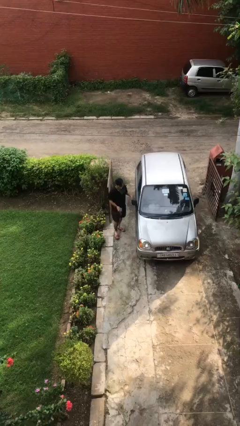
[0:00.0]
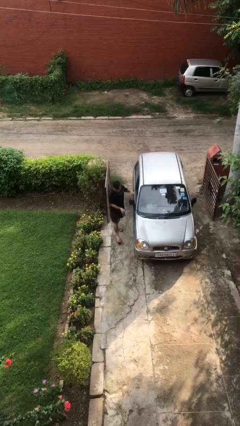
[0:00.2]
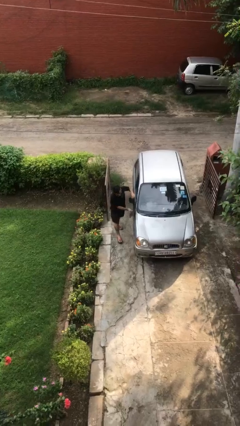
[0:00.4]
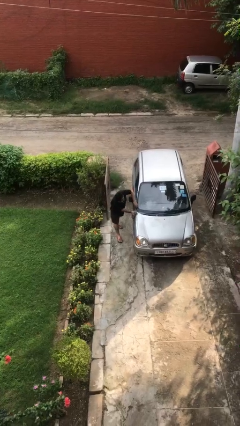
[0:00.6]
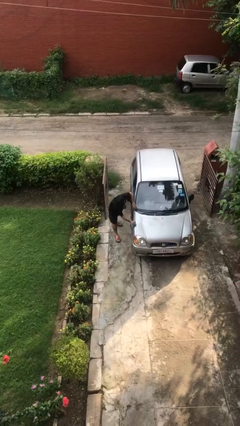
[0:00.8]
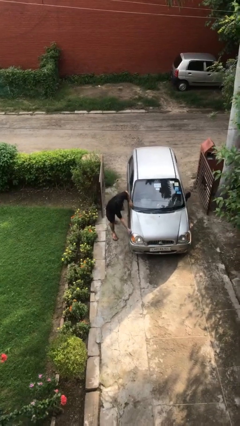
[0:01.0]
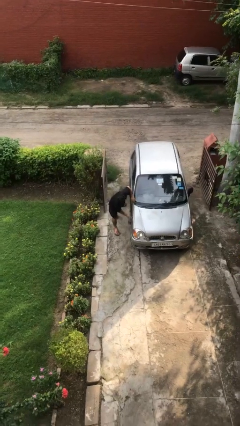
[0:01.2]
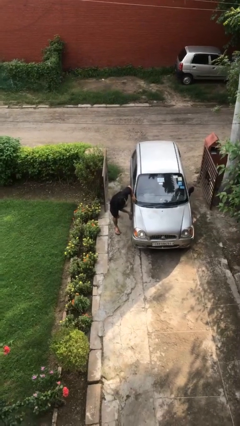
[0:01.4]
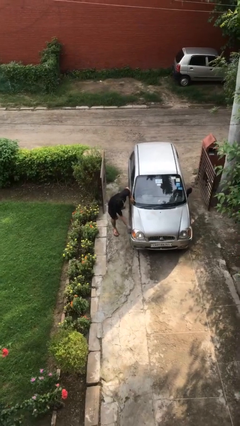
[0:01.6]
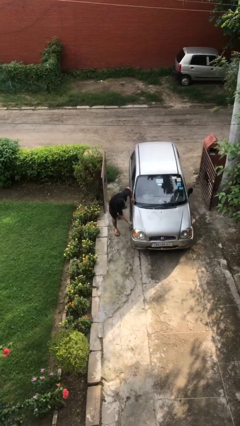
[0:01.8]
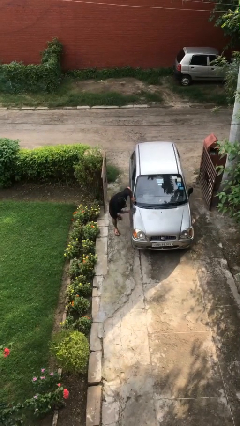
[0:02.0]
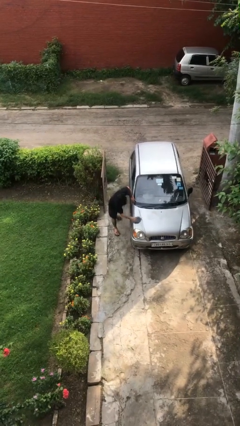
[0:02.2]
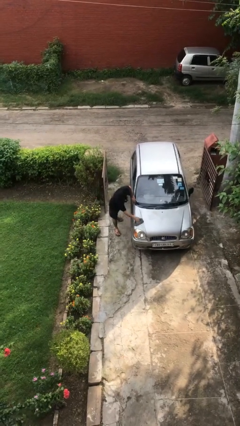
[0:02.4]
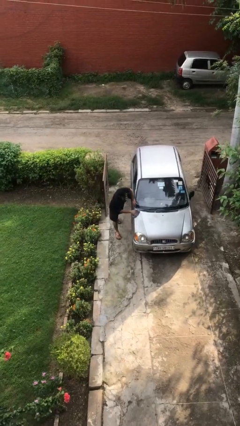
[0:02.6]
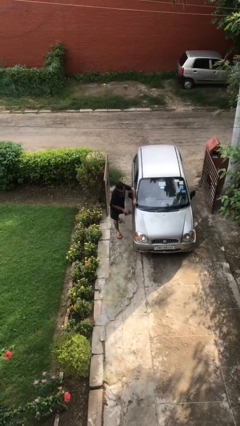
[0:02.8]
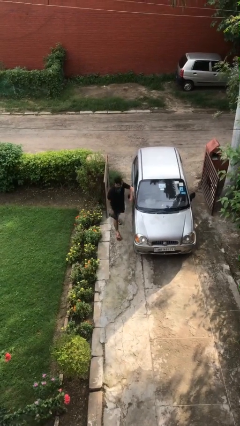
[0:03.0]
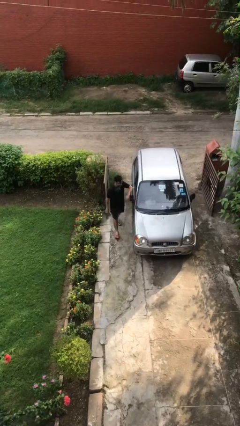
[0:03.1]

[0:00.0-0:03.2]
person polishes car with rag

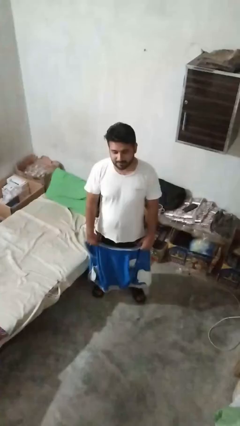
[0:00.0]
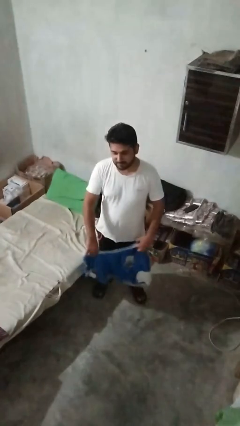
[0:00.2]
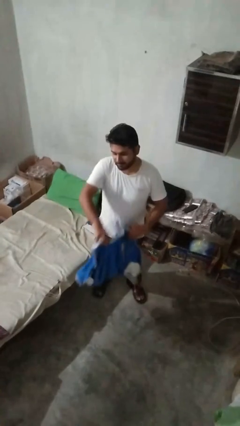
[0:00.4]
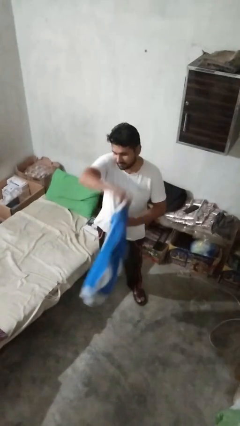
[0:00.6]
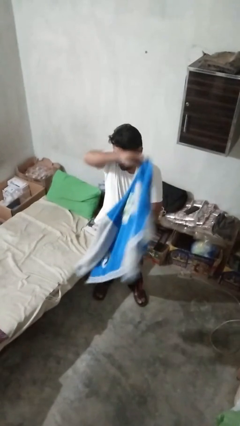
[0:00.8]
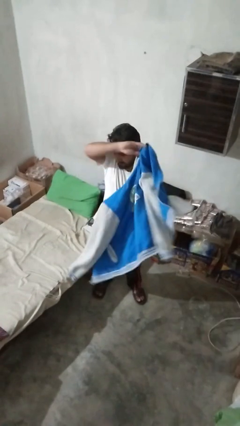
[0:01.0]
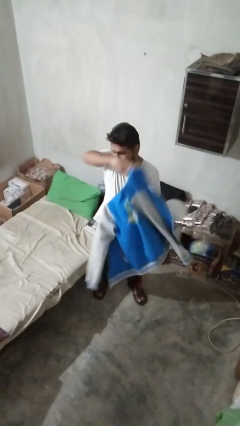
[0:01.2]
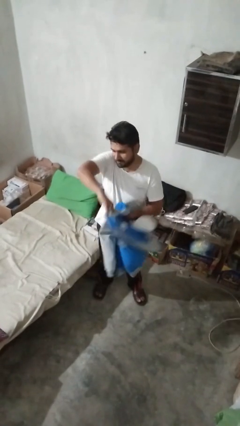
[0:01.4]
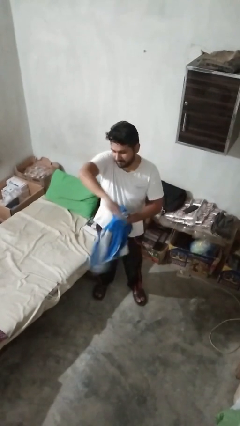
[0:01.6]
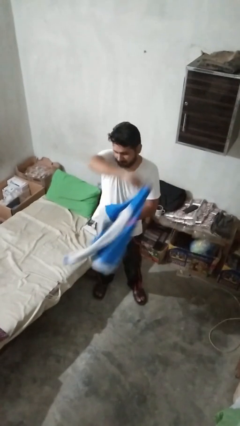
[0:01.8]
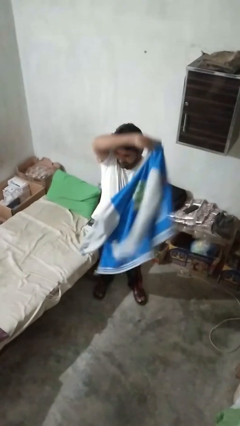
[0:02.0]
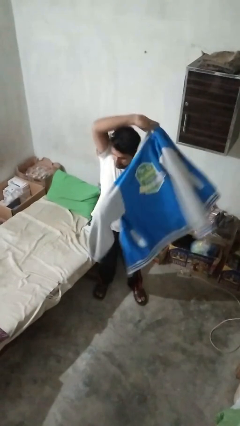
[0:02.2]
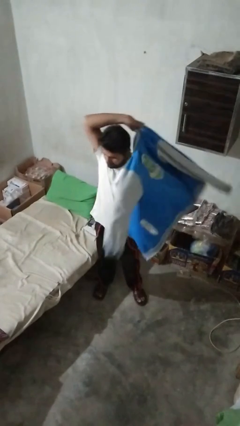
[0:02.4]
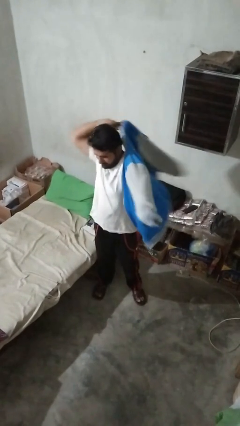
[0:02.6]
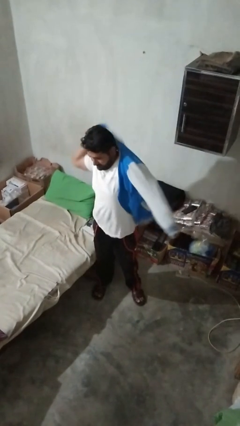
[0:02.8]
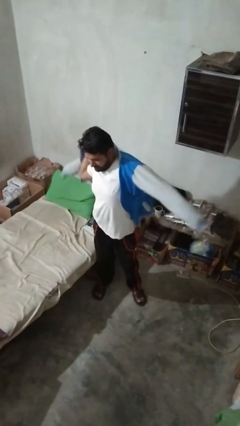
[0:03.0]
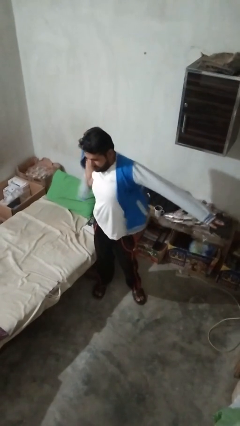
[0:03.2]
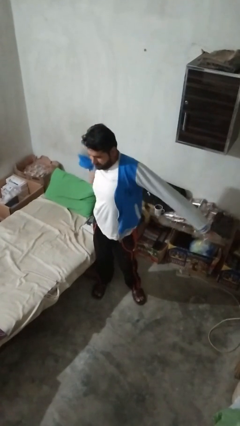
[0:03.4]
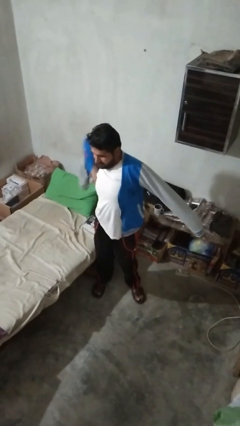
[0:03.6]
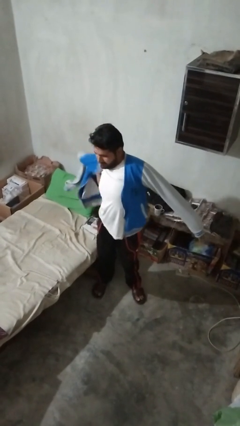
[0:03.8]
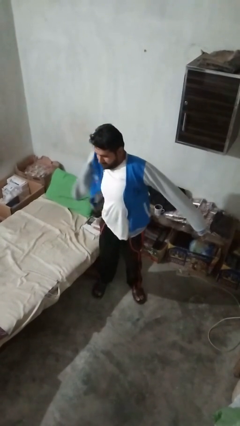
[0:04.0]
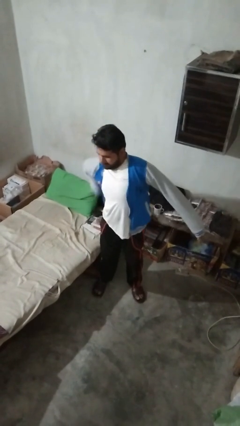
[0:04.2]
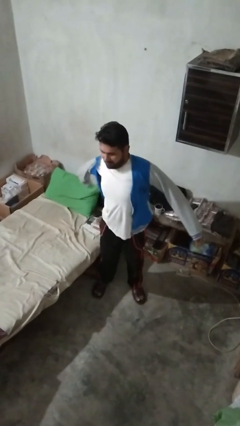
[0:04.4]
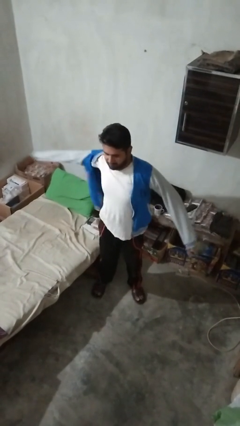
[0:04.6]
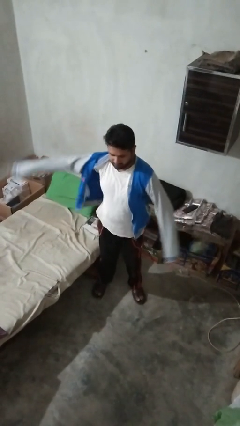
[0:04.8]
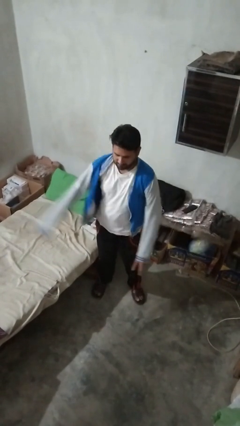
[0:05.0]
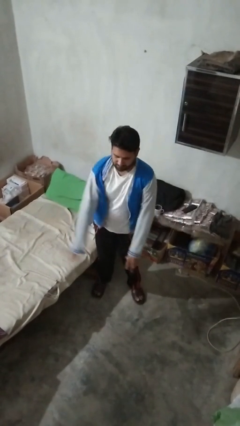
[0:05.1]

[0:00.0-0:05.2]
person puts on jacket

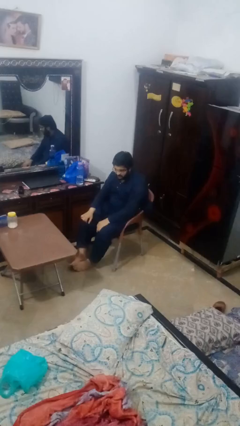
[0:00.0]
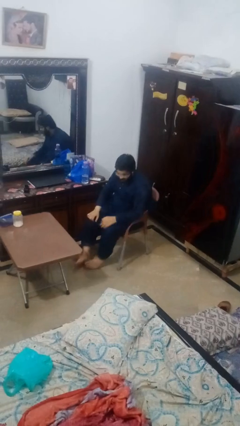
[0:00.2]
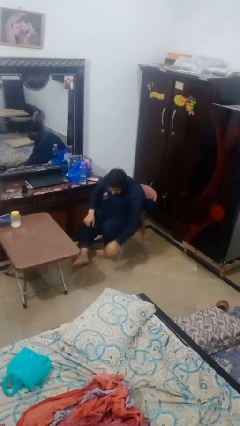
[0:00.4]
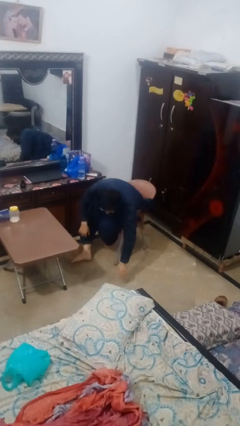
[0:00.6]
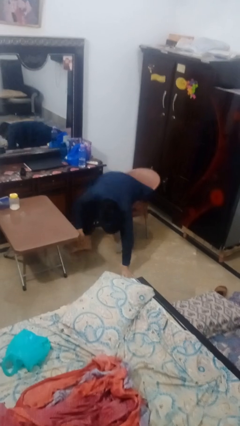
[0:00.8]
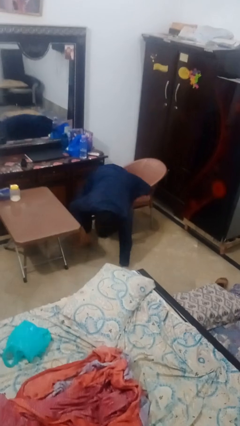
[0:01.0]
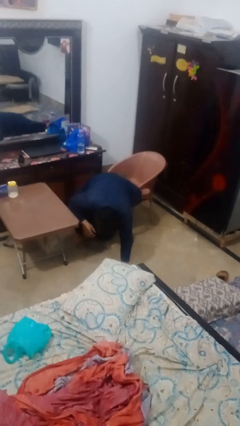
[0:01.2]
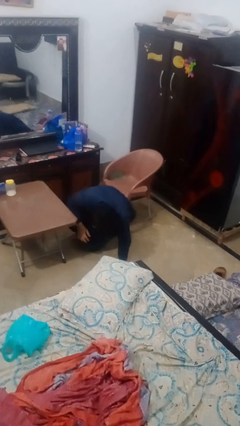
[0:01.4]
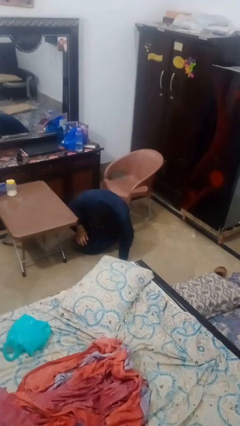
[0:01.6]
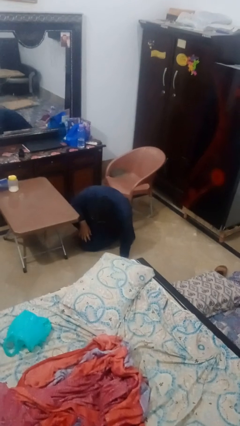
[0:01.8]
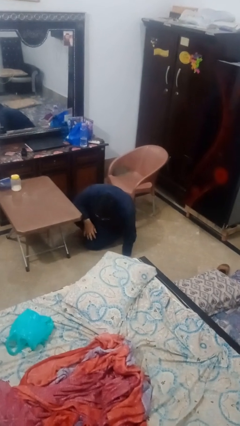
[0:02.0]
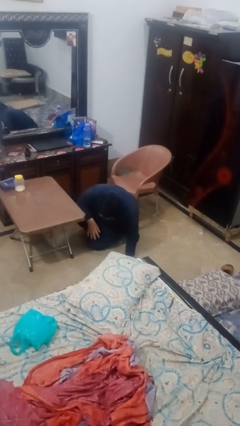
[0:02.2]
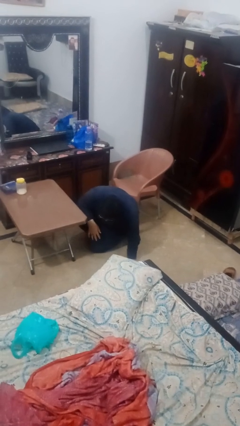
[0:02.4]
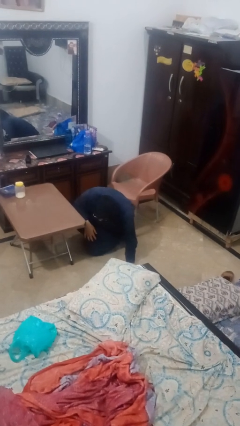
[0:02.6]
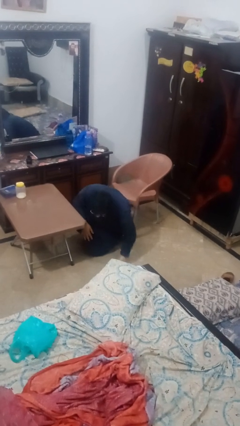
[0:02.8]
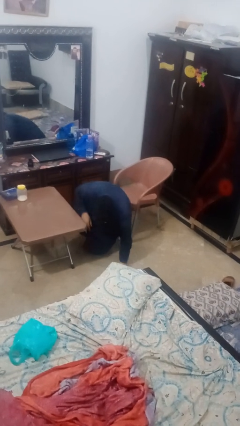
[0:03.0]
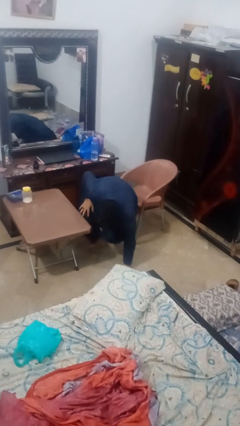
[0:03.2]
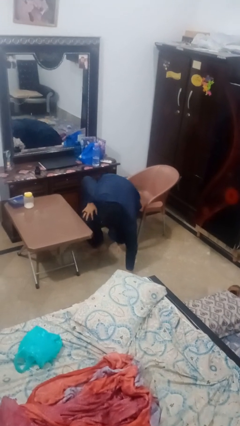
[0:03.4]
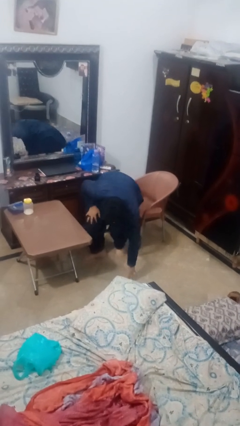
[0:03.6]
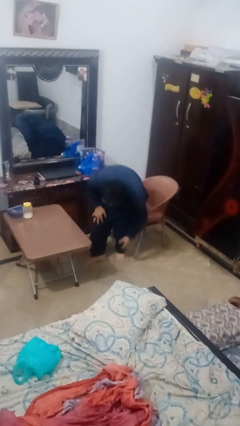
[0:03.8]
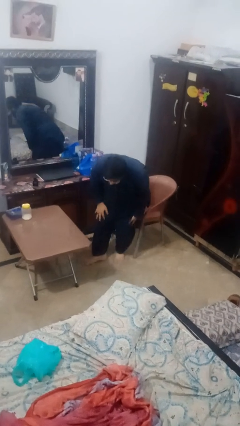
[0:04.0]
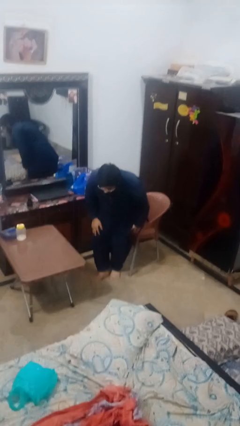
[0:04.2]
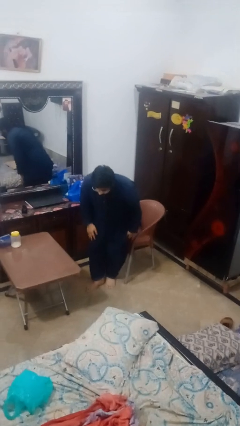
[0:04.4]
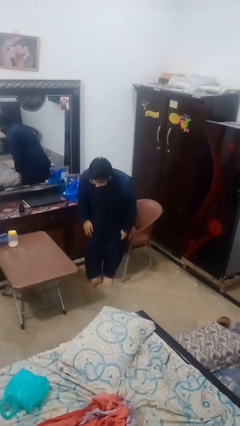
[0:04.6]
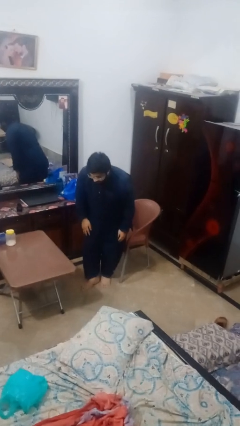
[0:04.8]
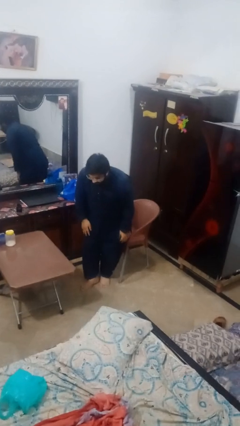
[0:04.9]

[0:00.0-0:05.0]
person falls from chair

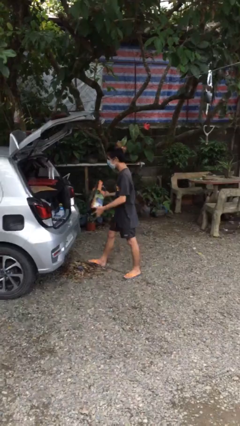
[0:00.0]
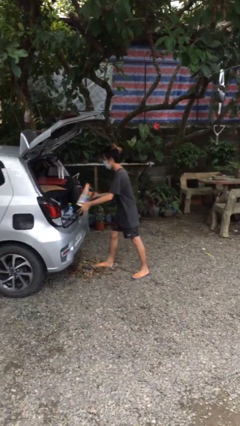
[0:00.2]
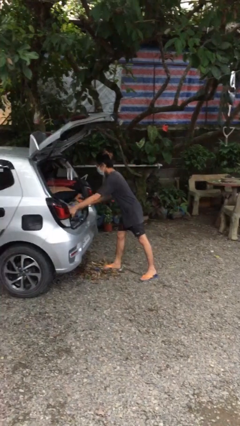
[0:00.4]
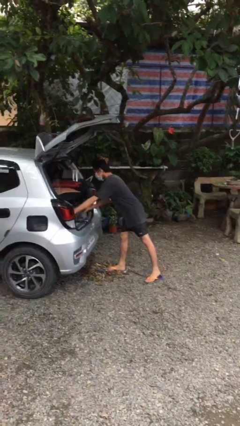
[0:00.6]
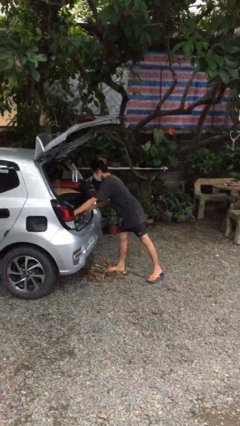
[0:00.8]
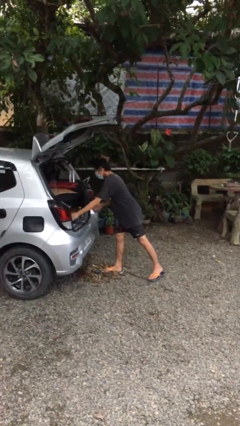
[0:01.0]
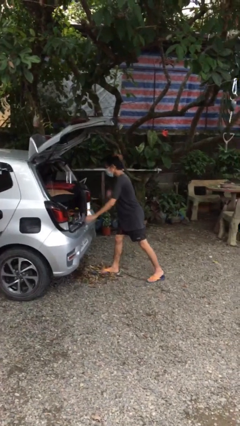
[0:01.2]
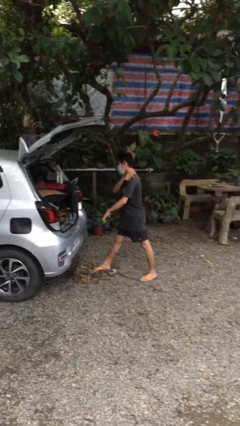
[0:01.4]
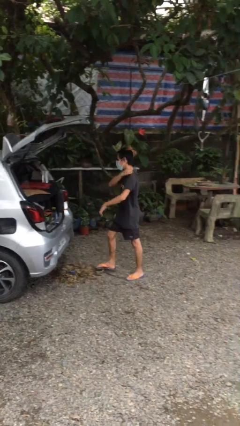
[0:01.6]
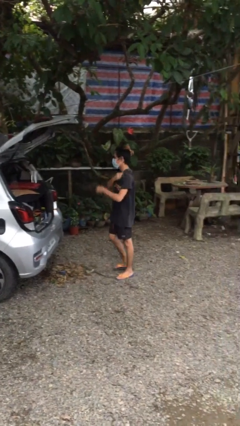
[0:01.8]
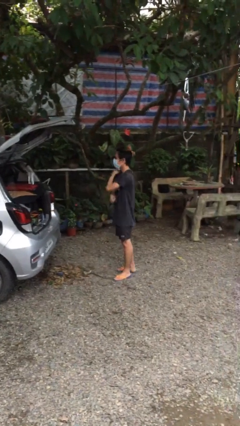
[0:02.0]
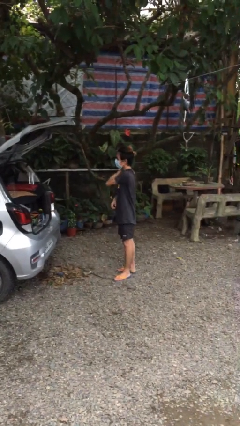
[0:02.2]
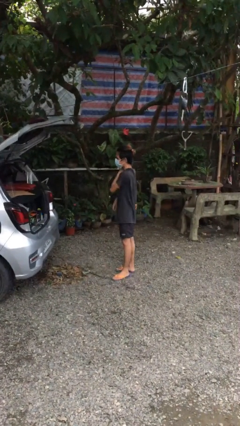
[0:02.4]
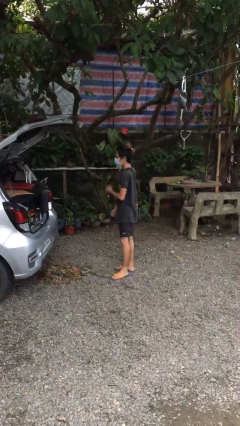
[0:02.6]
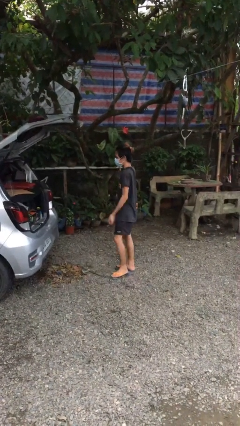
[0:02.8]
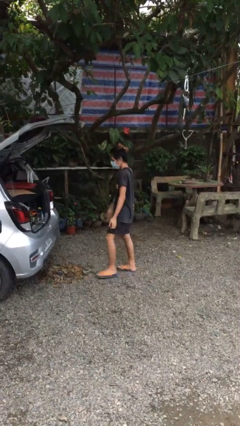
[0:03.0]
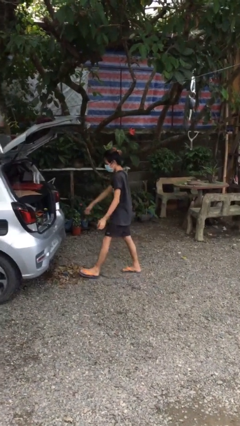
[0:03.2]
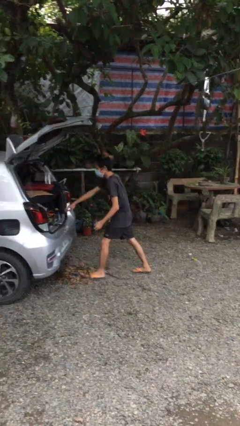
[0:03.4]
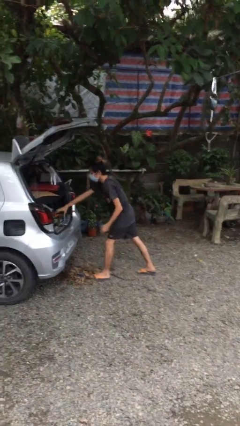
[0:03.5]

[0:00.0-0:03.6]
person loads car

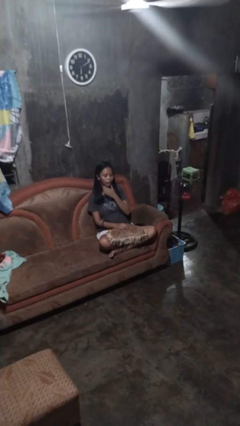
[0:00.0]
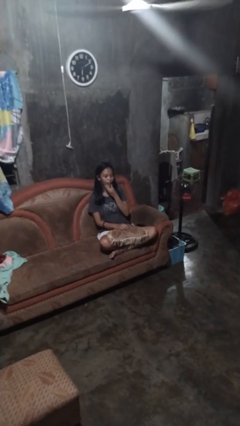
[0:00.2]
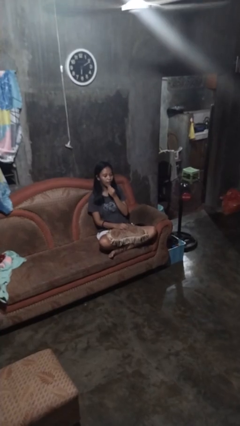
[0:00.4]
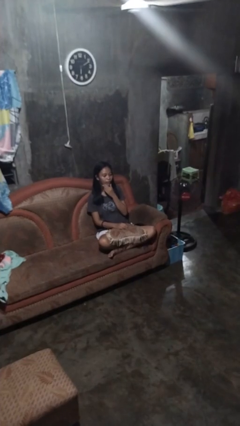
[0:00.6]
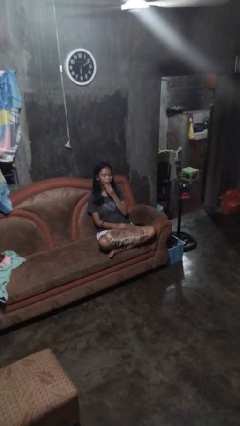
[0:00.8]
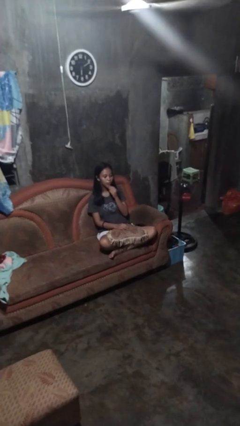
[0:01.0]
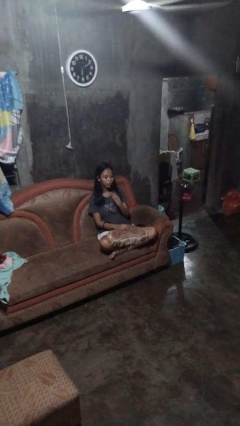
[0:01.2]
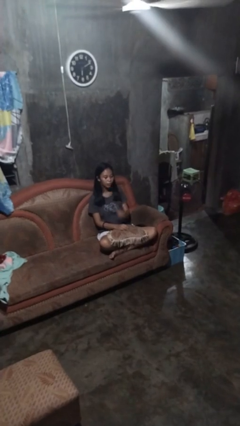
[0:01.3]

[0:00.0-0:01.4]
person strokes chin
